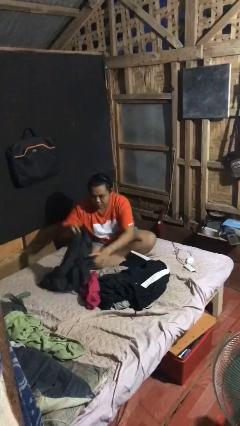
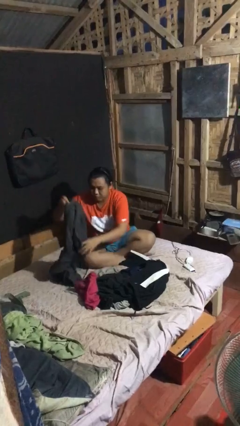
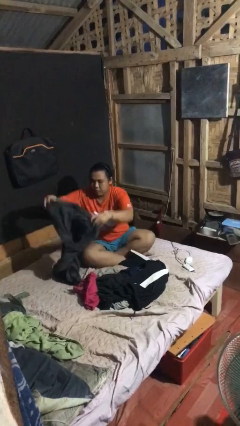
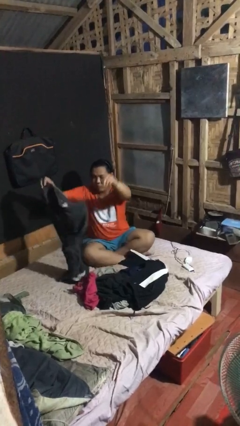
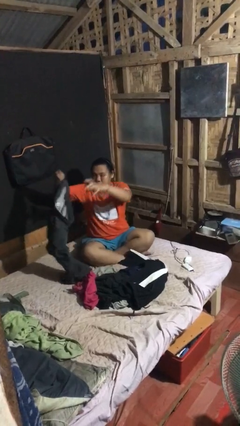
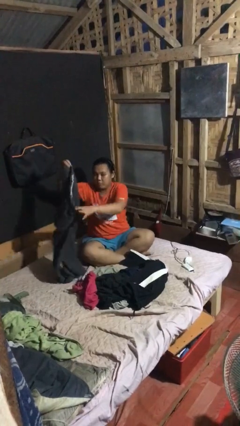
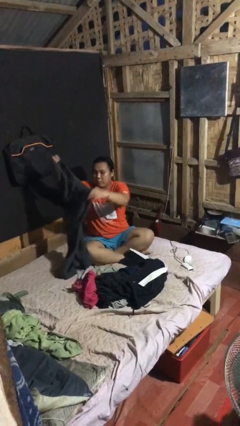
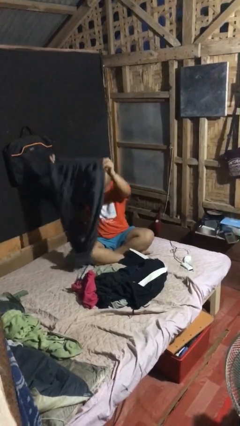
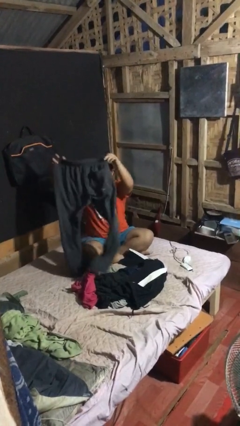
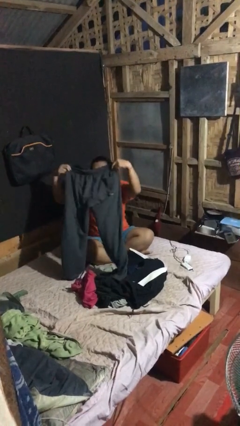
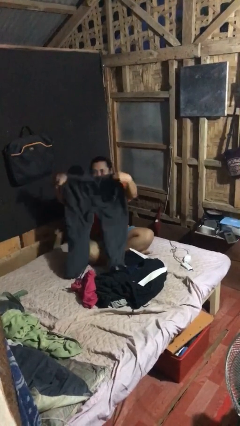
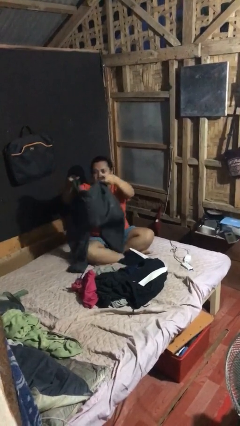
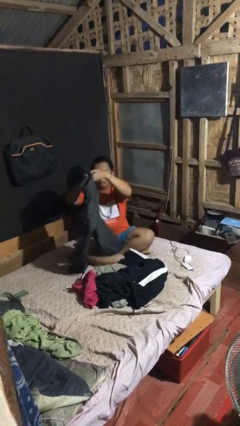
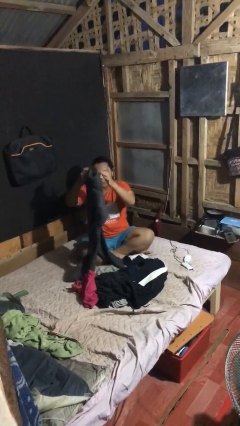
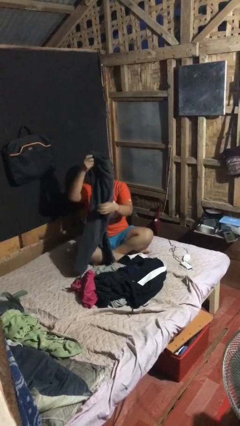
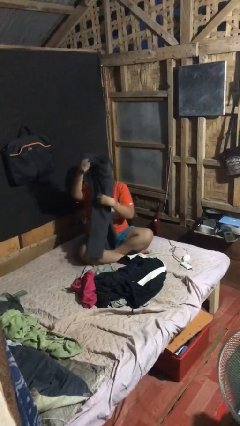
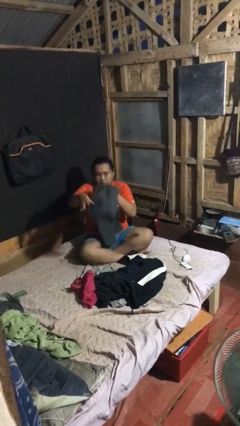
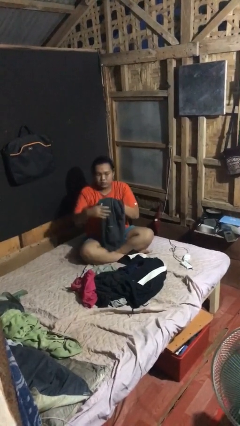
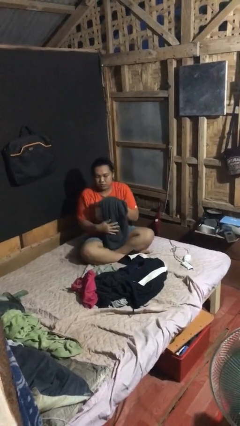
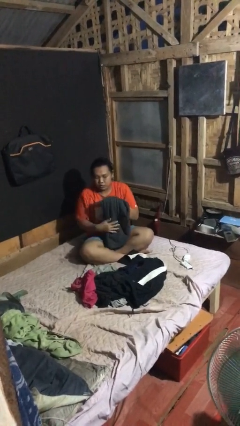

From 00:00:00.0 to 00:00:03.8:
person folds pants

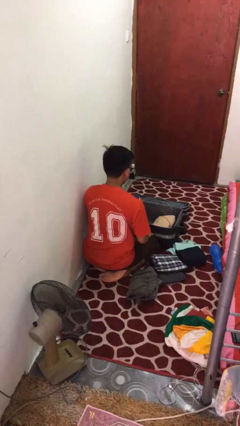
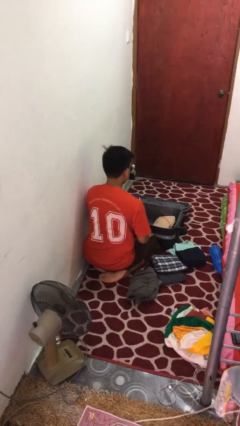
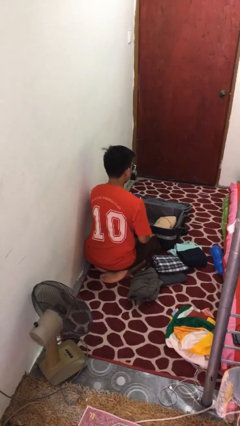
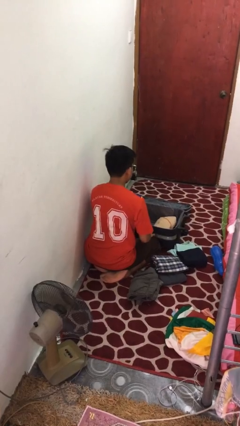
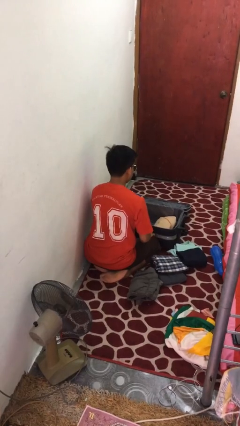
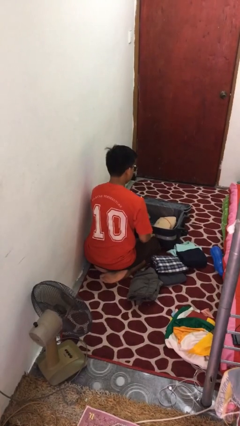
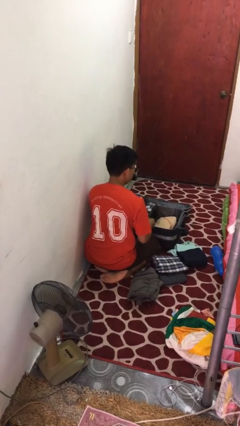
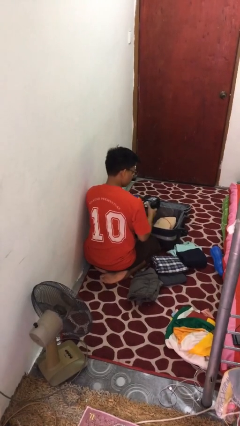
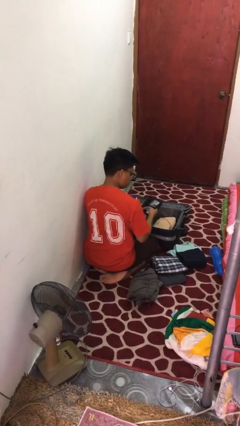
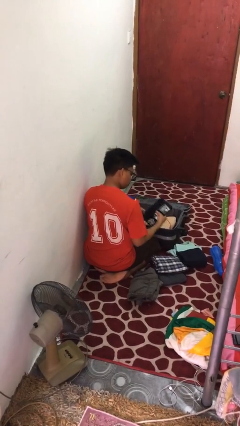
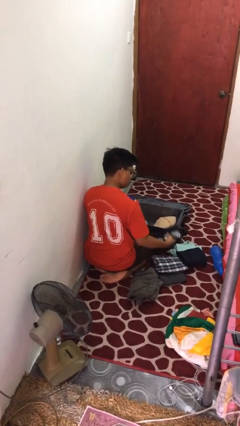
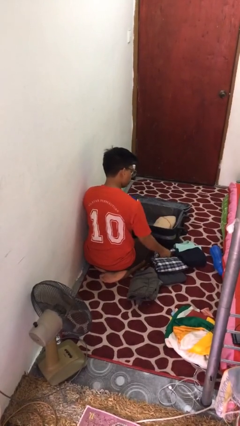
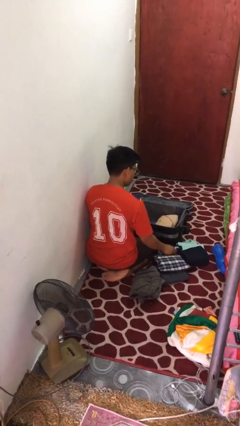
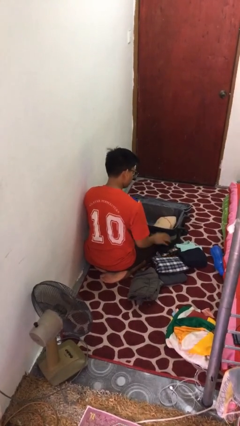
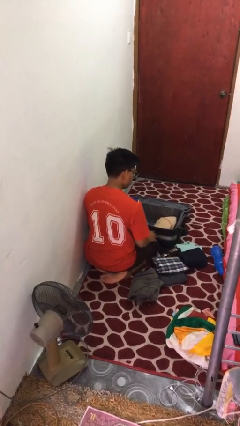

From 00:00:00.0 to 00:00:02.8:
person unloads clothes from suitcase

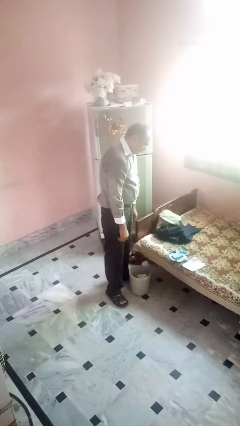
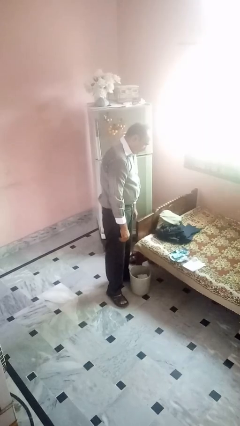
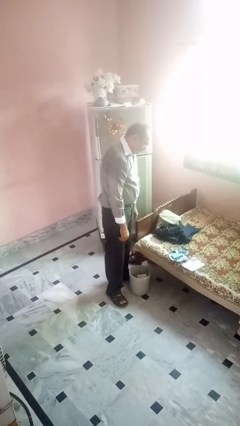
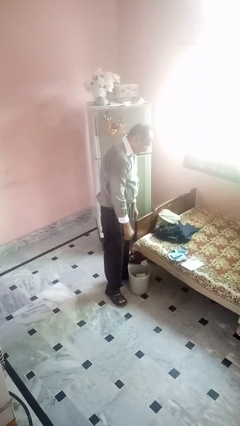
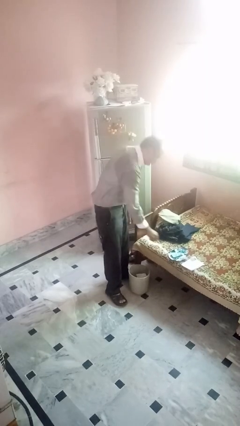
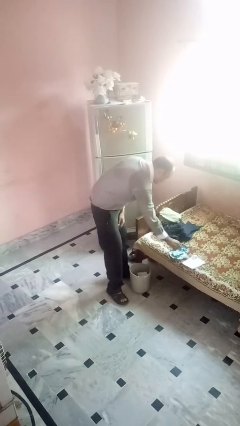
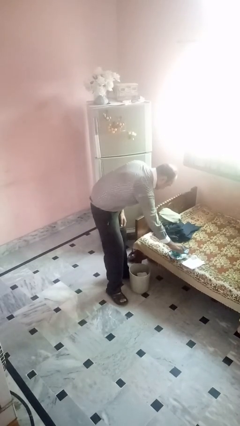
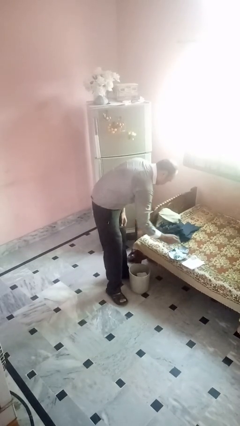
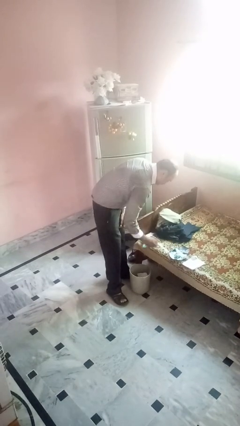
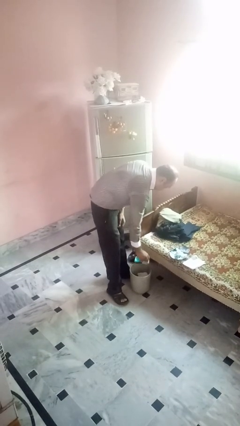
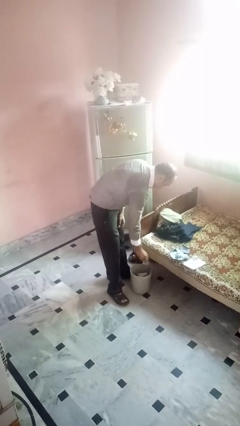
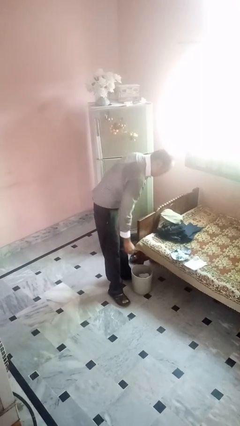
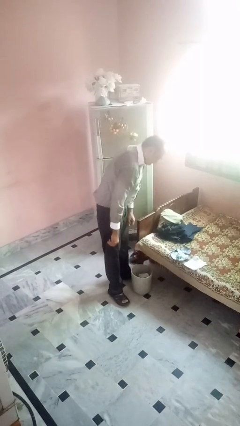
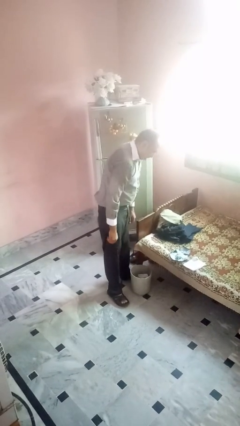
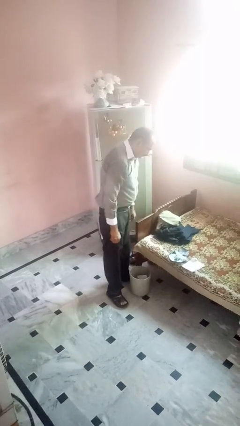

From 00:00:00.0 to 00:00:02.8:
person discards trash

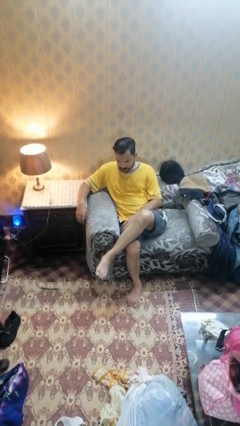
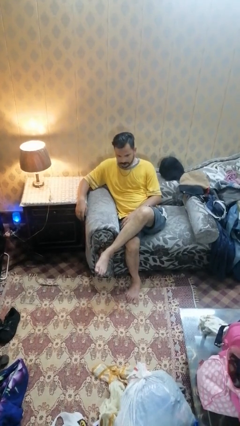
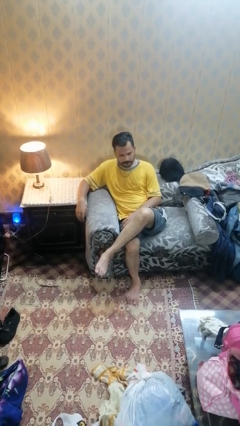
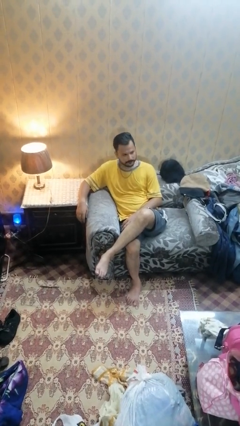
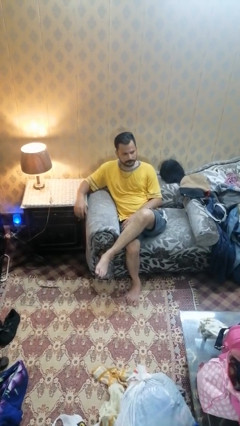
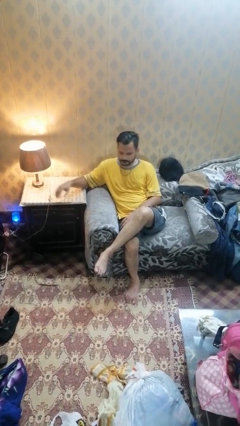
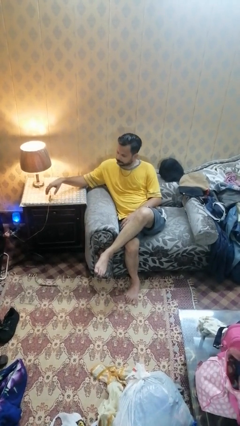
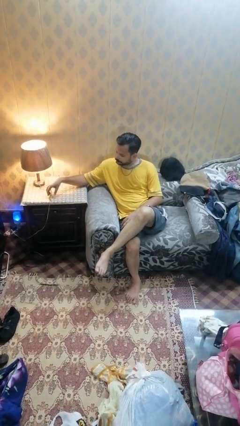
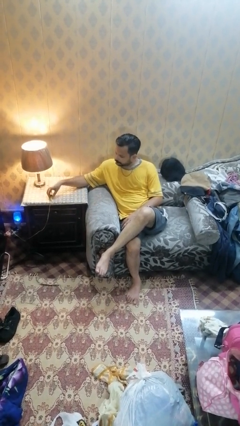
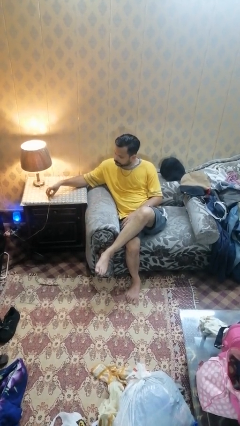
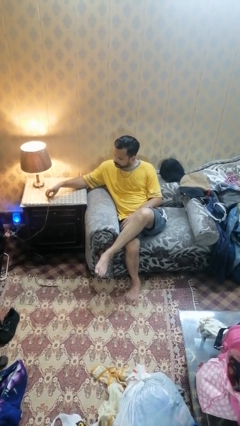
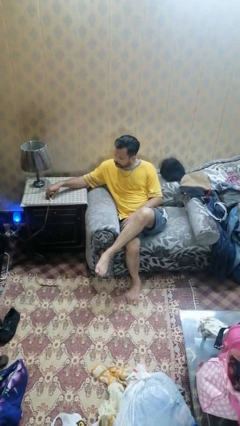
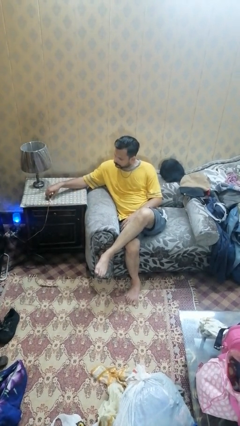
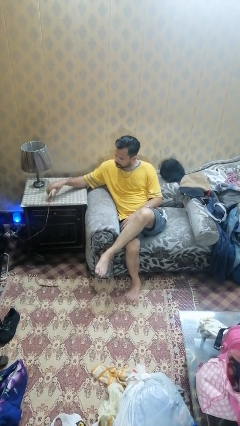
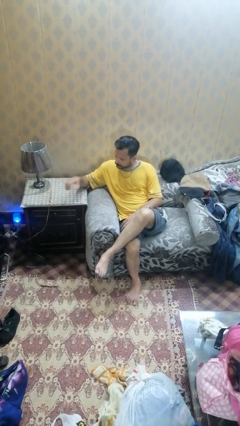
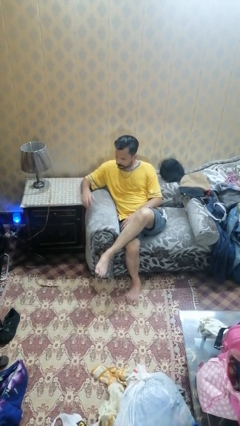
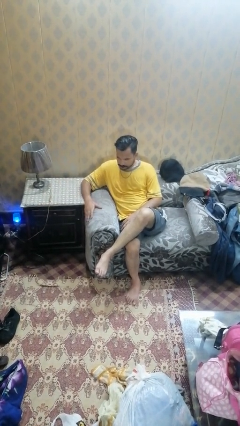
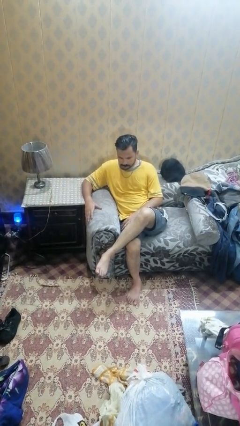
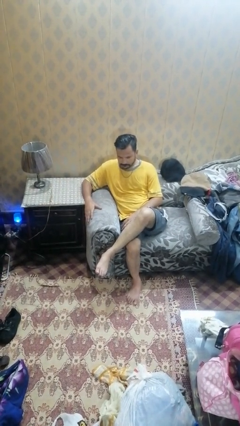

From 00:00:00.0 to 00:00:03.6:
person turns off lamp

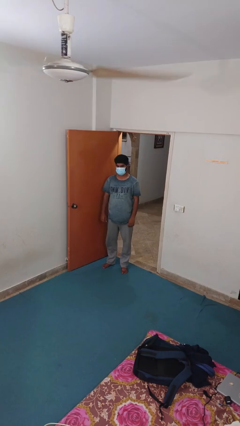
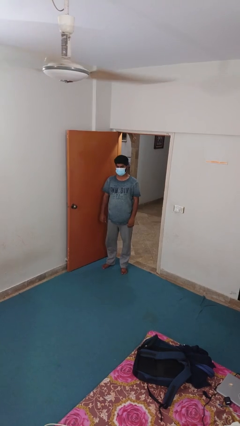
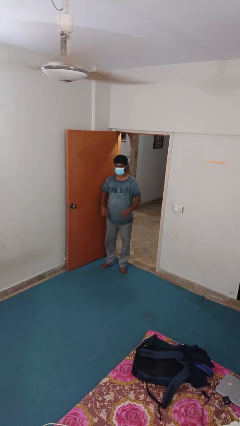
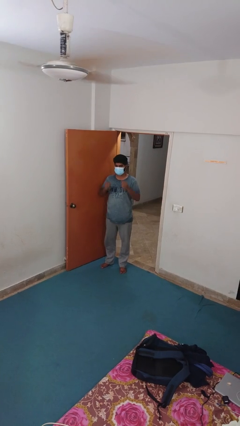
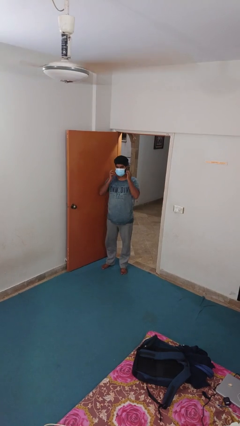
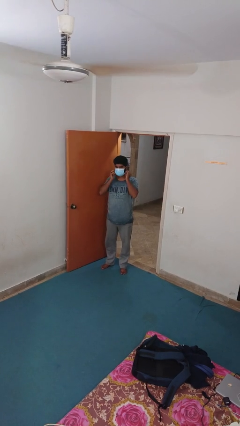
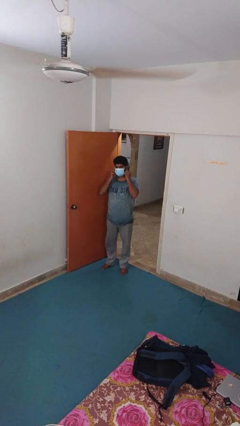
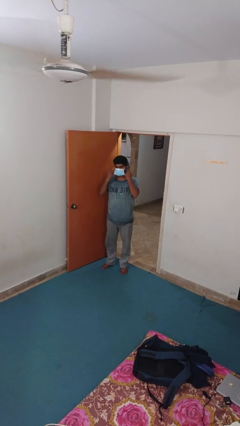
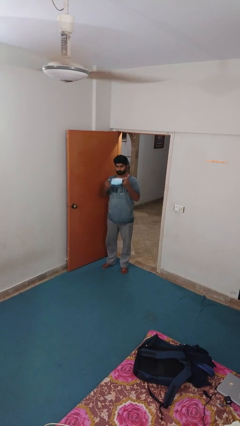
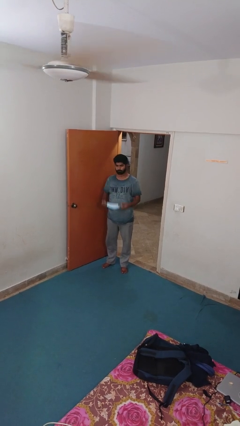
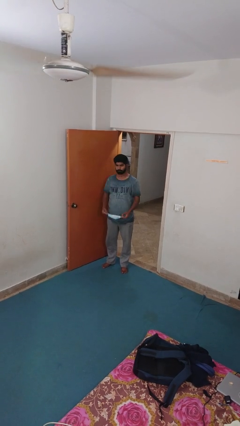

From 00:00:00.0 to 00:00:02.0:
person takes off facemask

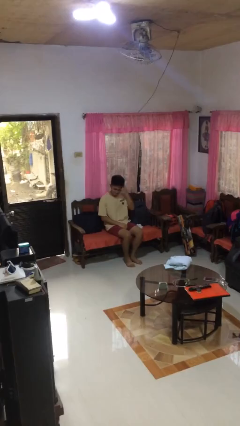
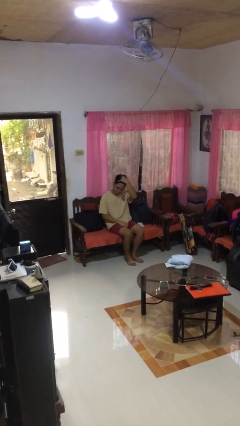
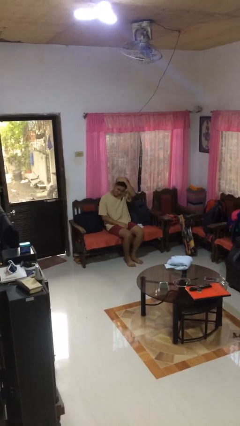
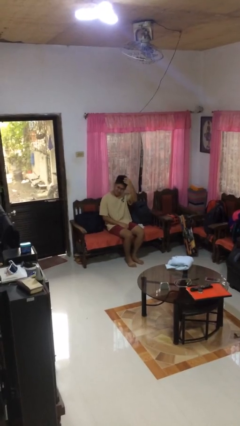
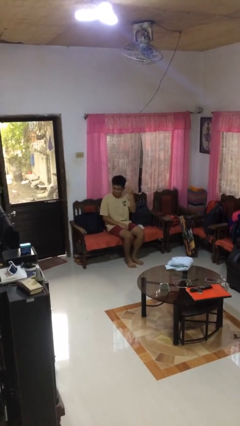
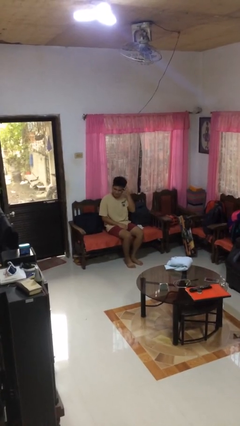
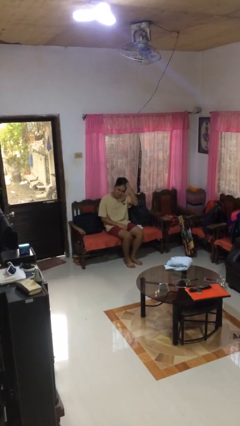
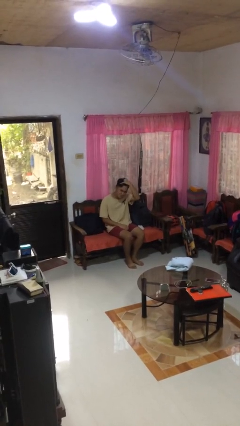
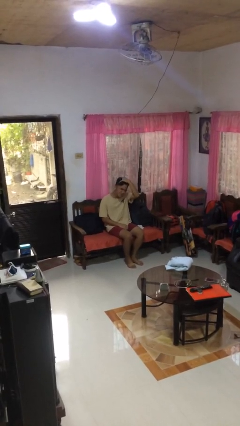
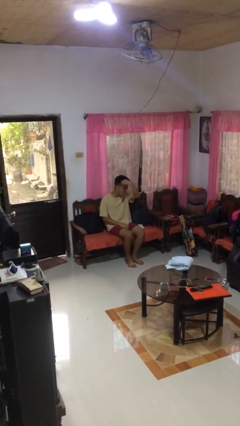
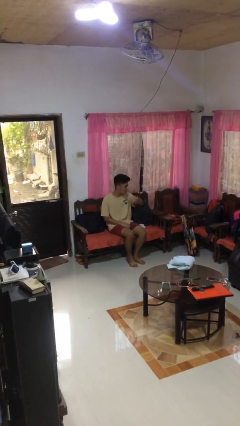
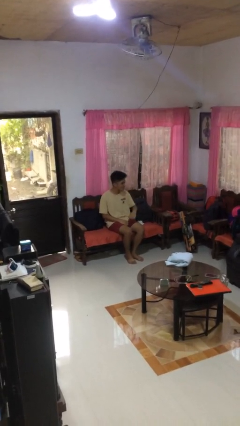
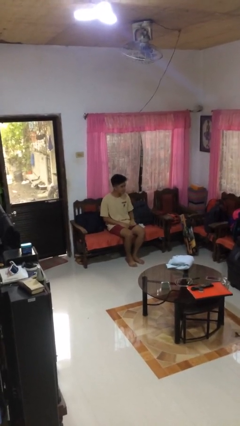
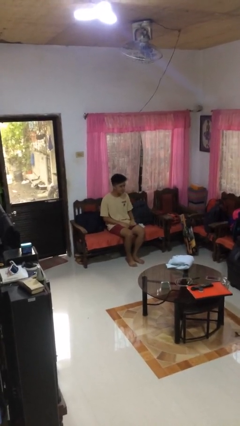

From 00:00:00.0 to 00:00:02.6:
person strokes hair

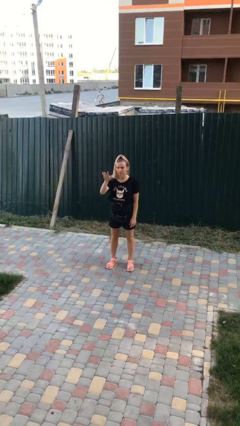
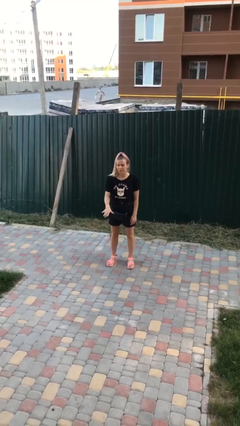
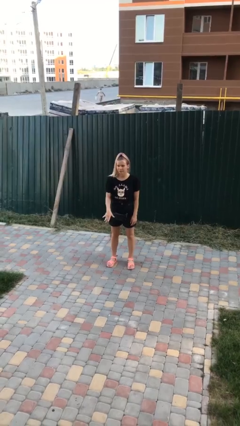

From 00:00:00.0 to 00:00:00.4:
person gestures swipe down
